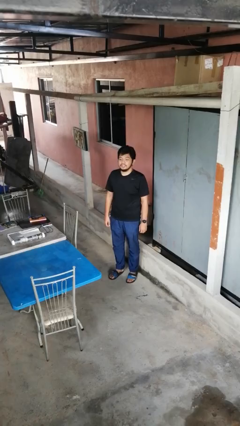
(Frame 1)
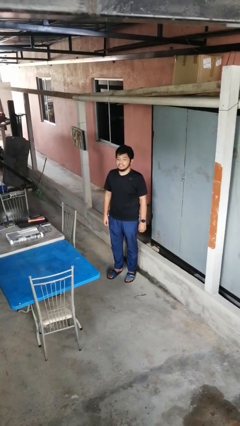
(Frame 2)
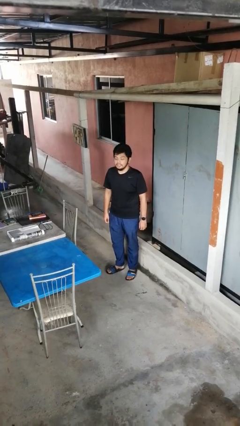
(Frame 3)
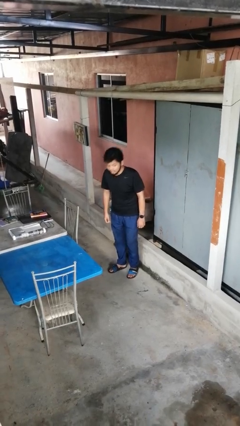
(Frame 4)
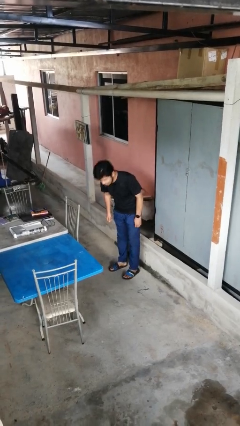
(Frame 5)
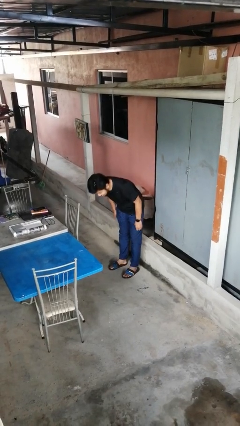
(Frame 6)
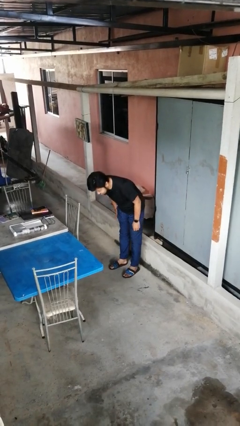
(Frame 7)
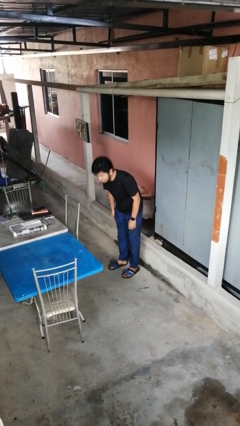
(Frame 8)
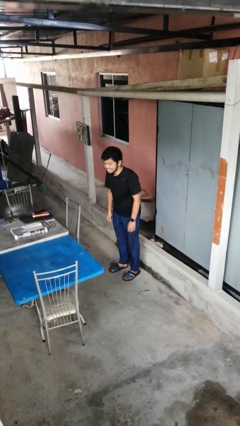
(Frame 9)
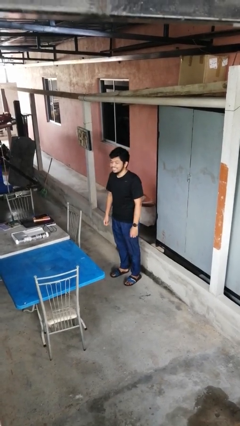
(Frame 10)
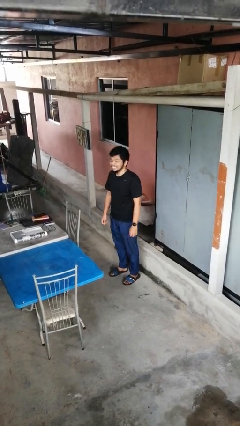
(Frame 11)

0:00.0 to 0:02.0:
person bows

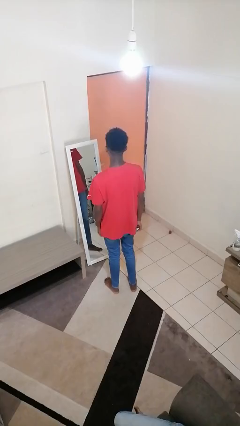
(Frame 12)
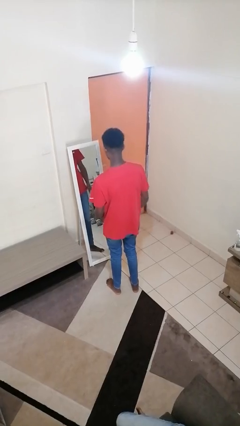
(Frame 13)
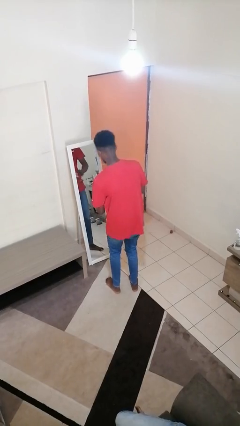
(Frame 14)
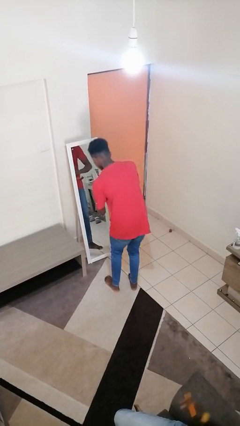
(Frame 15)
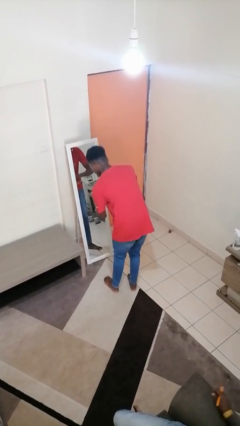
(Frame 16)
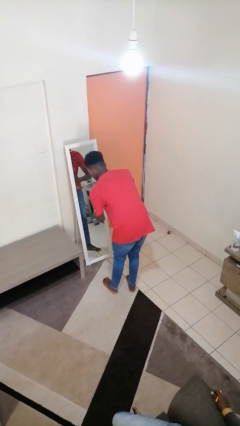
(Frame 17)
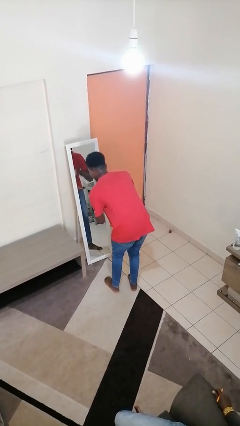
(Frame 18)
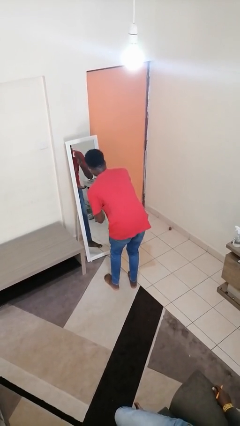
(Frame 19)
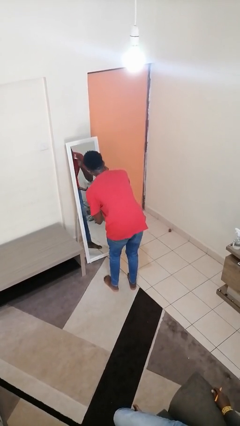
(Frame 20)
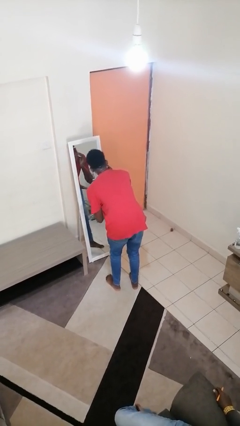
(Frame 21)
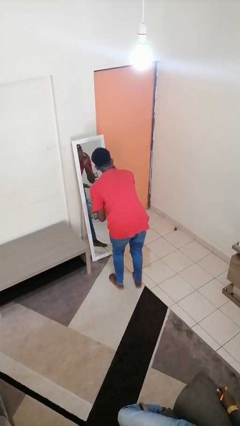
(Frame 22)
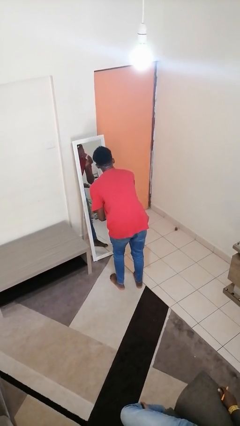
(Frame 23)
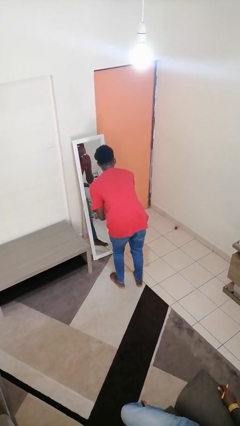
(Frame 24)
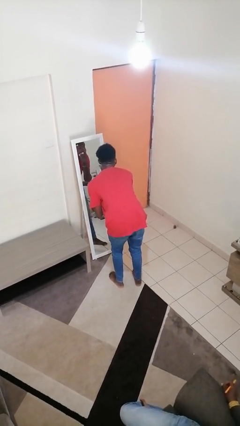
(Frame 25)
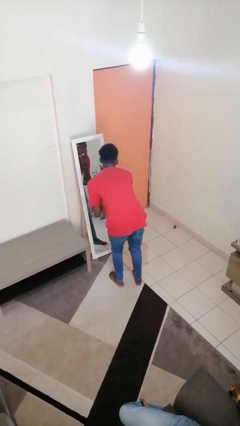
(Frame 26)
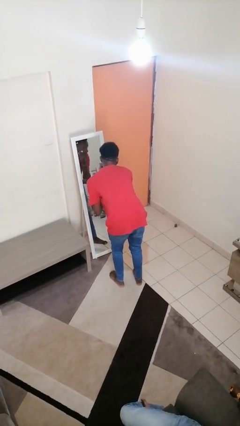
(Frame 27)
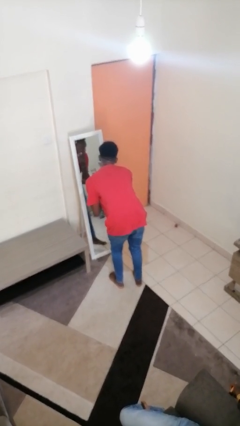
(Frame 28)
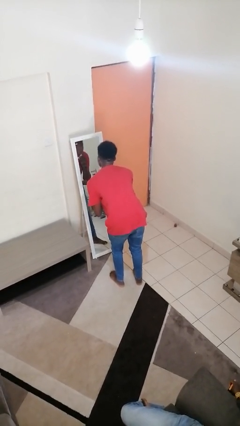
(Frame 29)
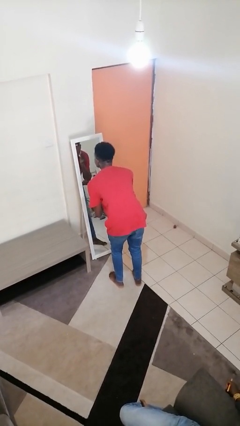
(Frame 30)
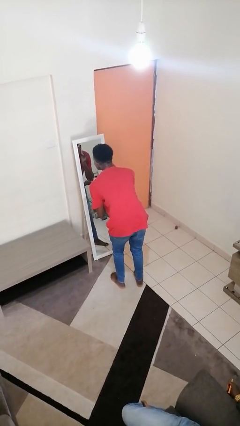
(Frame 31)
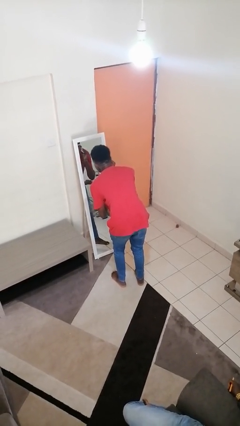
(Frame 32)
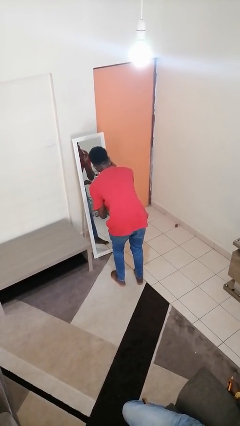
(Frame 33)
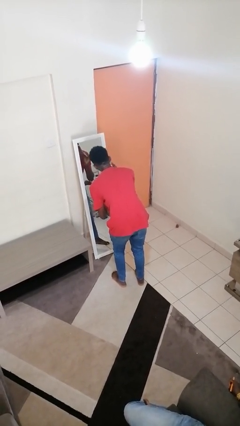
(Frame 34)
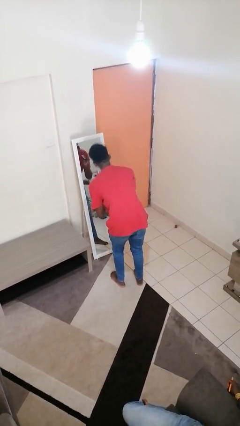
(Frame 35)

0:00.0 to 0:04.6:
person applies foundation makeup

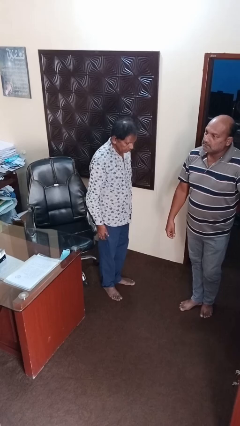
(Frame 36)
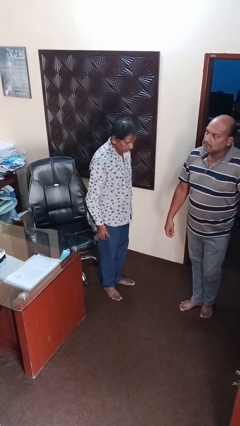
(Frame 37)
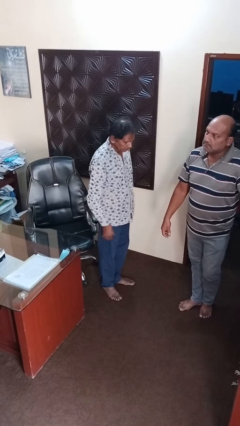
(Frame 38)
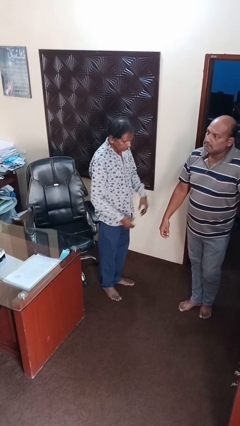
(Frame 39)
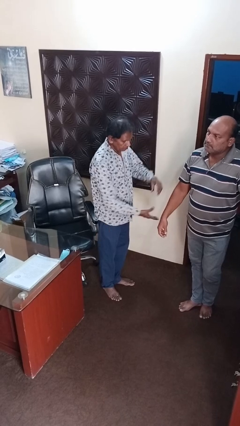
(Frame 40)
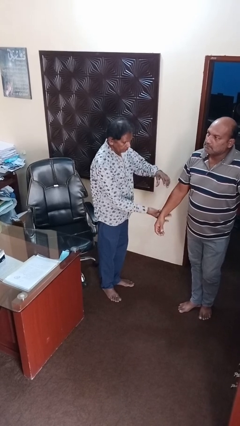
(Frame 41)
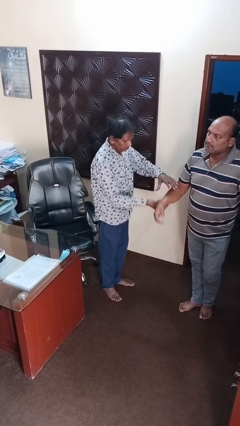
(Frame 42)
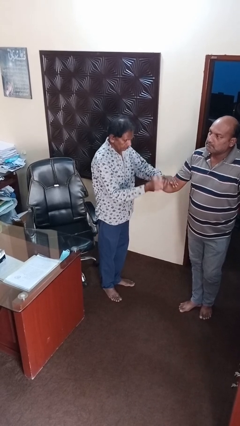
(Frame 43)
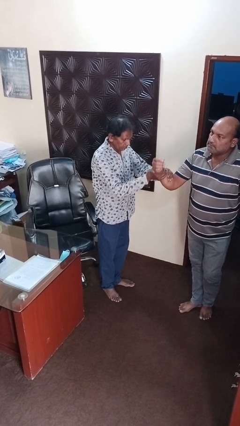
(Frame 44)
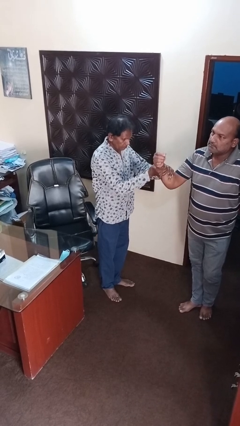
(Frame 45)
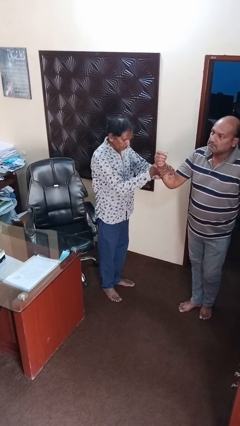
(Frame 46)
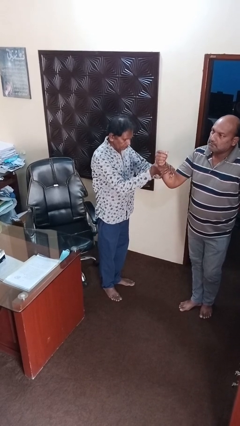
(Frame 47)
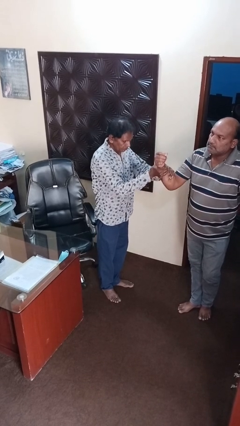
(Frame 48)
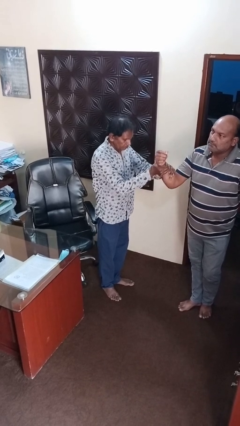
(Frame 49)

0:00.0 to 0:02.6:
person grabs person by forearm

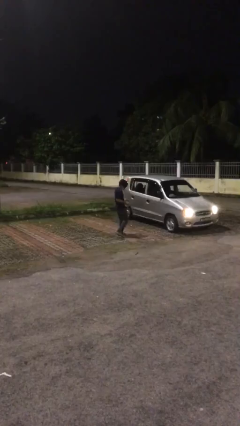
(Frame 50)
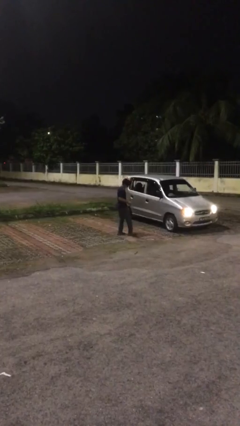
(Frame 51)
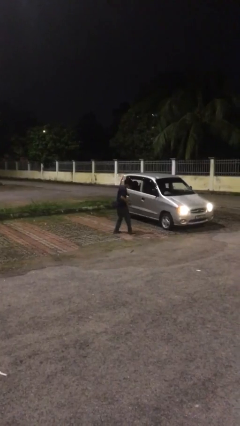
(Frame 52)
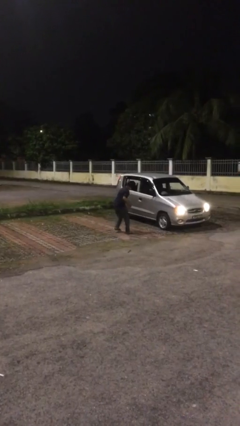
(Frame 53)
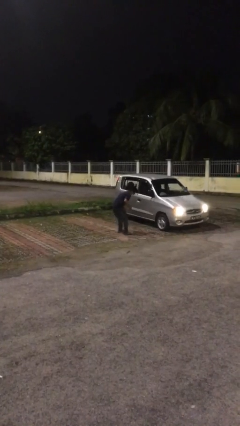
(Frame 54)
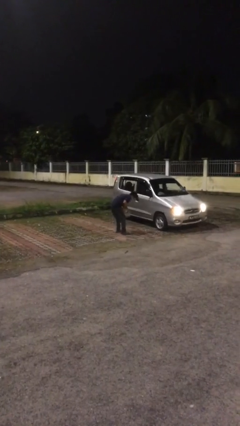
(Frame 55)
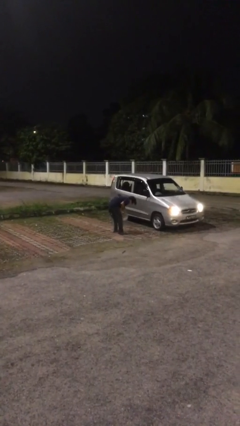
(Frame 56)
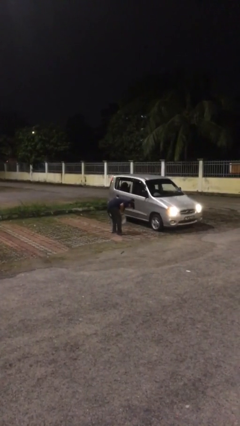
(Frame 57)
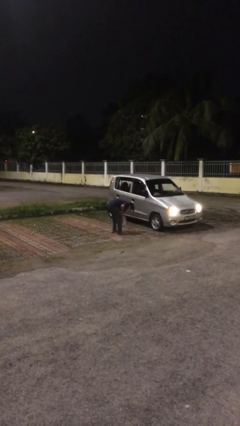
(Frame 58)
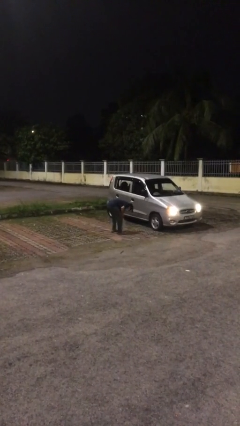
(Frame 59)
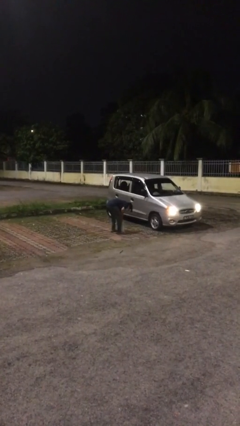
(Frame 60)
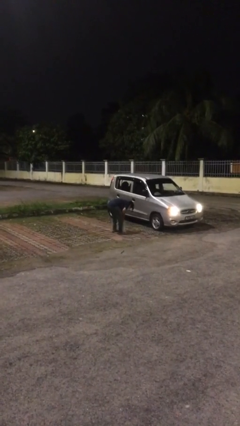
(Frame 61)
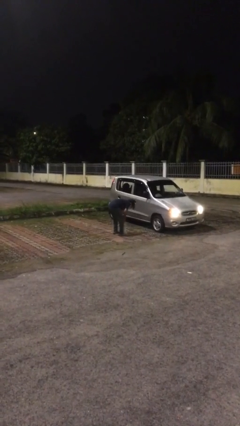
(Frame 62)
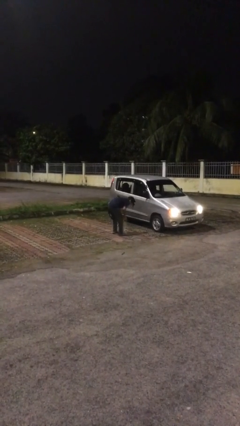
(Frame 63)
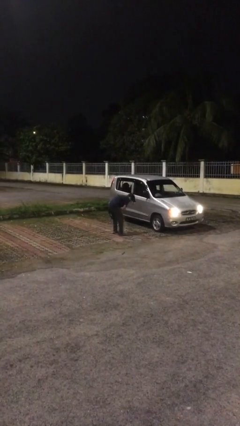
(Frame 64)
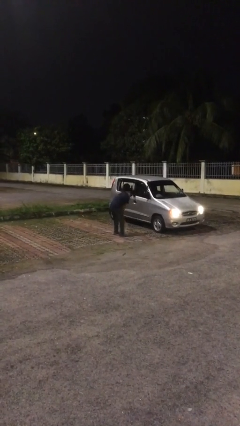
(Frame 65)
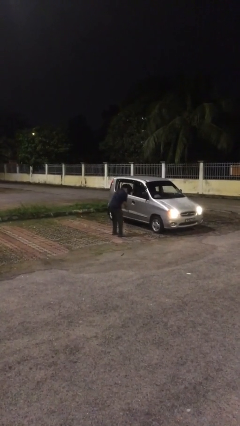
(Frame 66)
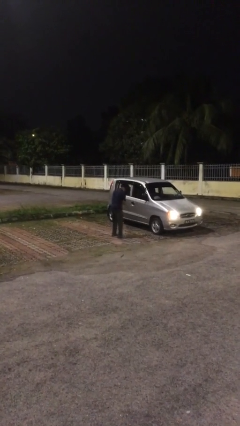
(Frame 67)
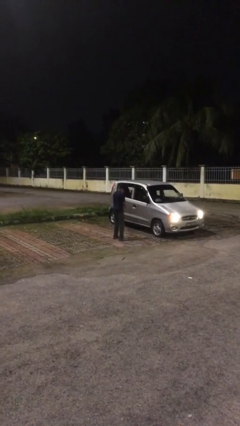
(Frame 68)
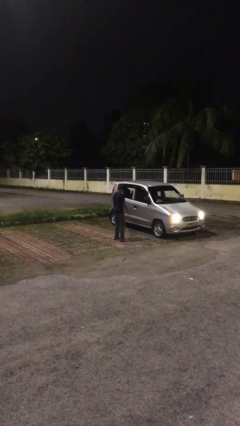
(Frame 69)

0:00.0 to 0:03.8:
person puts down object on floor

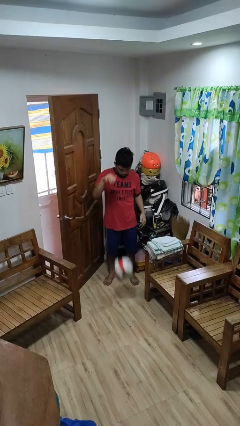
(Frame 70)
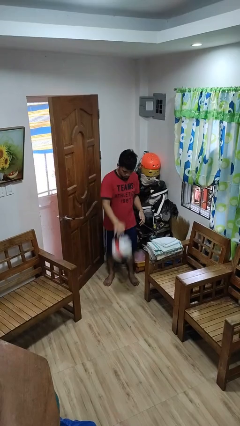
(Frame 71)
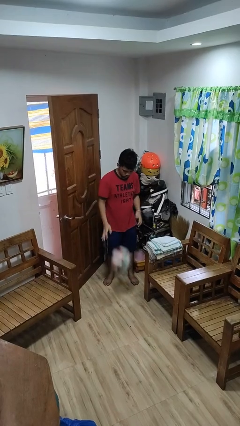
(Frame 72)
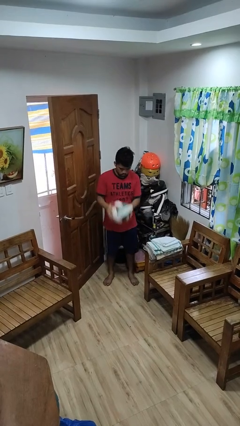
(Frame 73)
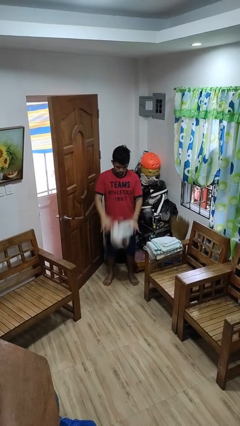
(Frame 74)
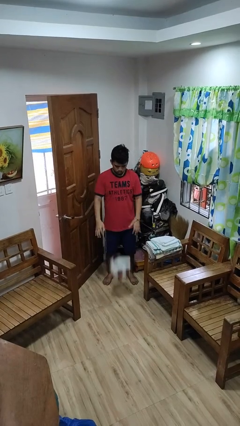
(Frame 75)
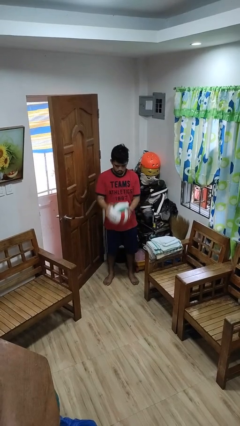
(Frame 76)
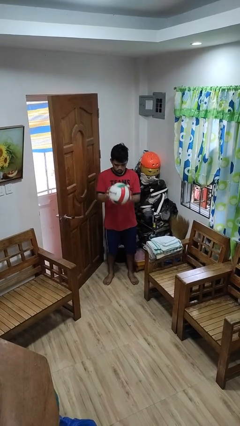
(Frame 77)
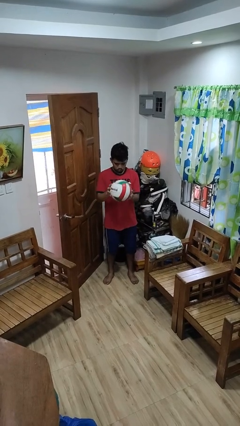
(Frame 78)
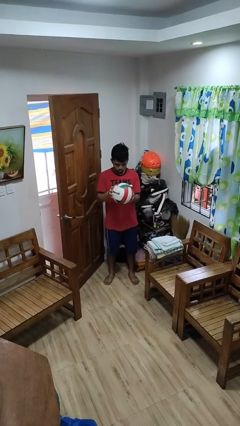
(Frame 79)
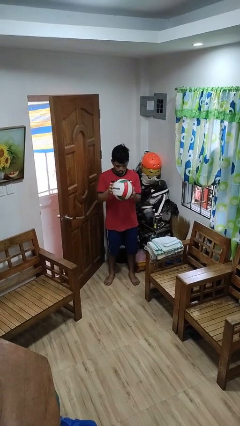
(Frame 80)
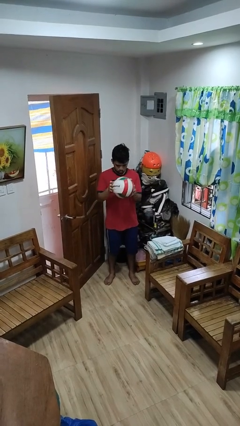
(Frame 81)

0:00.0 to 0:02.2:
person bounces ball on floor

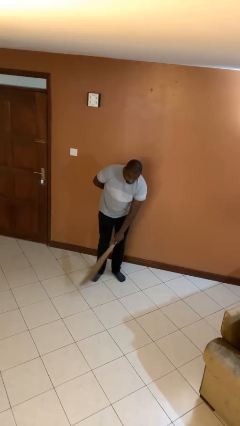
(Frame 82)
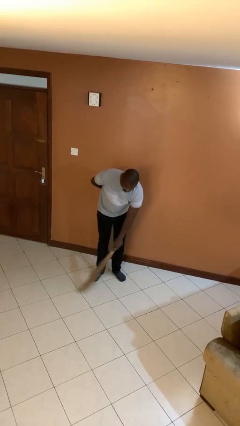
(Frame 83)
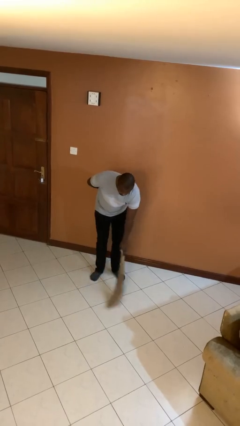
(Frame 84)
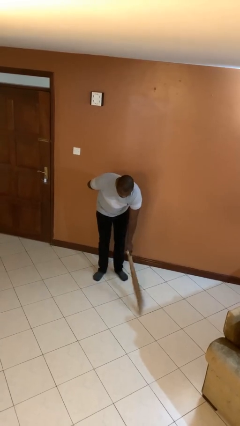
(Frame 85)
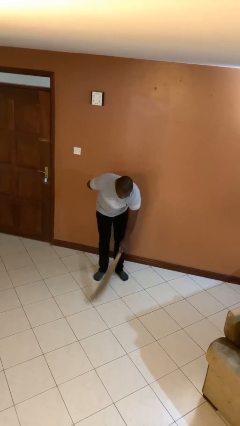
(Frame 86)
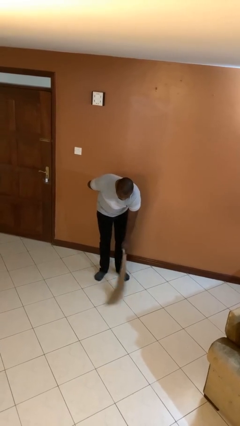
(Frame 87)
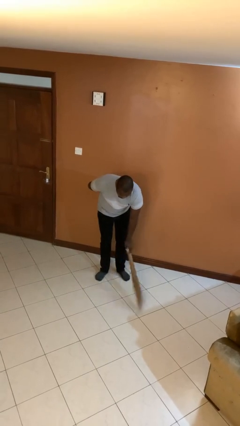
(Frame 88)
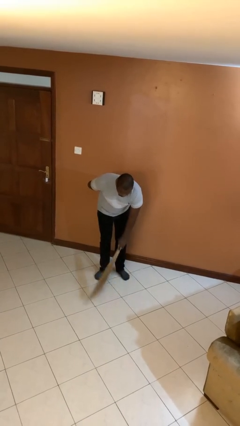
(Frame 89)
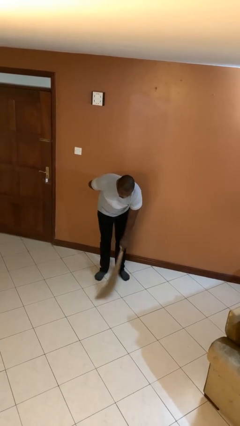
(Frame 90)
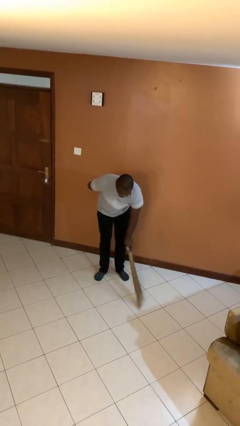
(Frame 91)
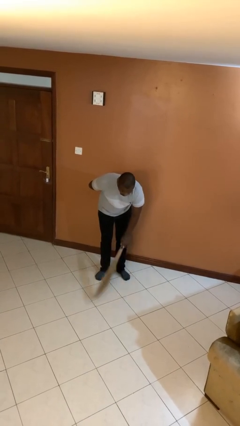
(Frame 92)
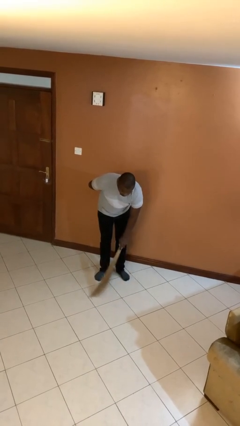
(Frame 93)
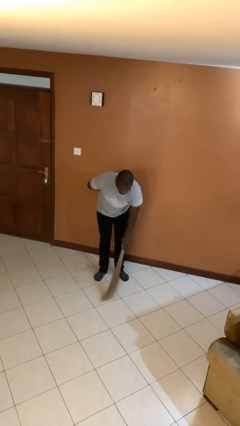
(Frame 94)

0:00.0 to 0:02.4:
person sweeps floor
